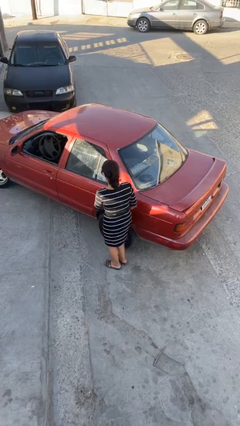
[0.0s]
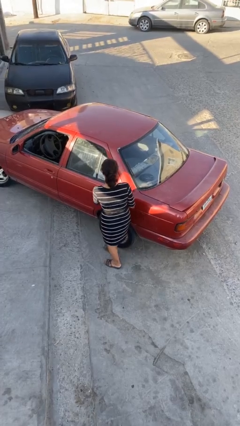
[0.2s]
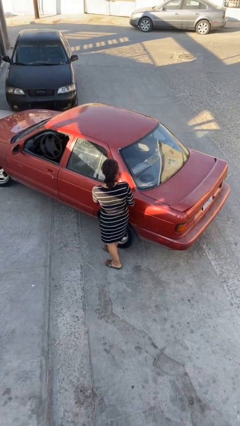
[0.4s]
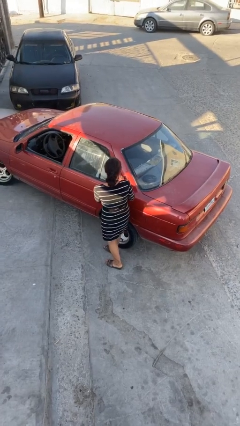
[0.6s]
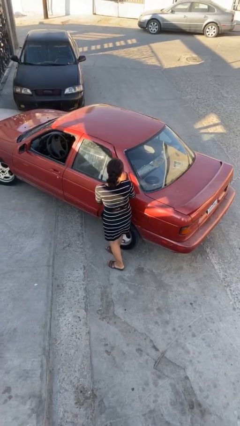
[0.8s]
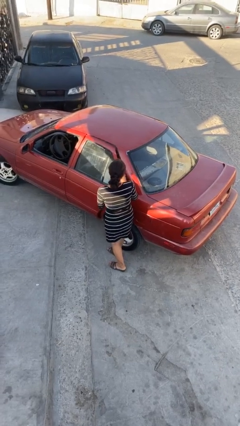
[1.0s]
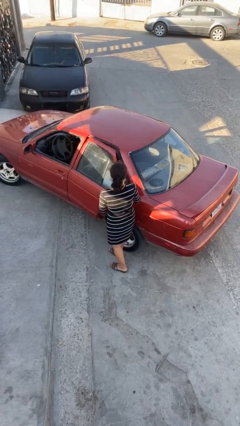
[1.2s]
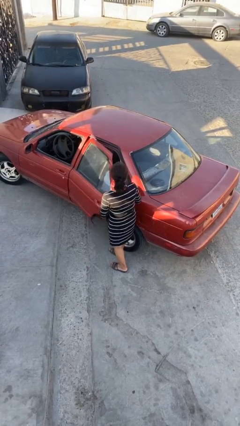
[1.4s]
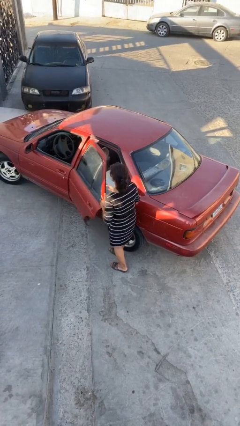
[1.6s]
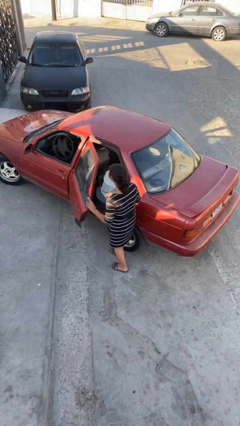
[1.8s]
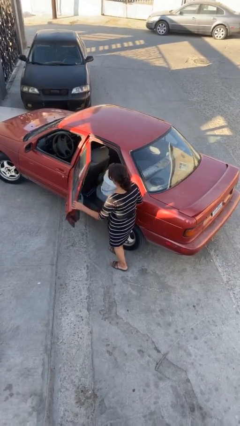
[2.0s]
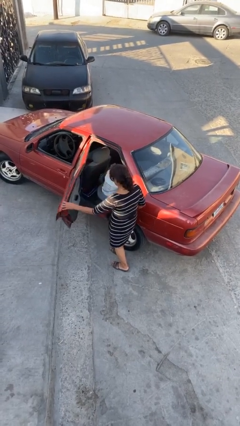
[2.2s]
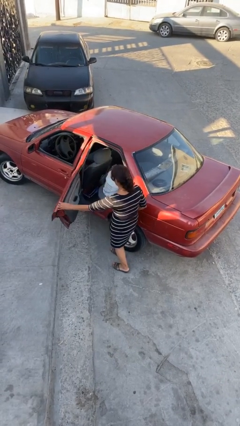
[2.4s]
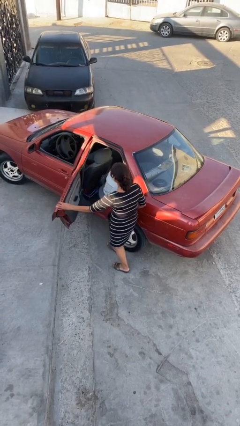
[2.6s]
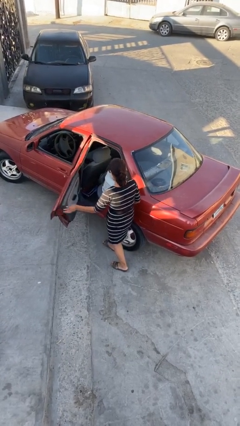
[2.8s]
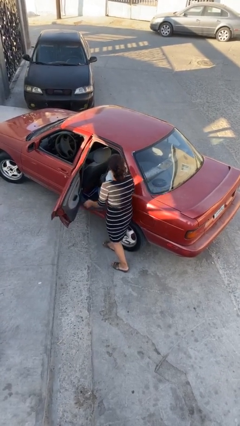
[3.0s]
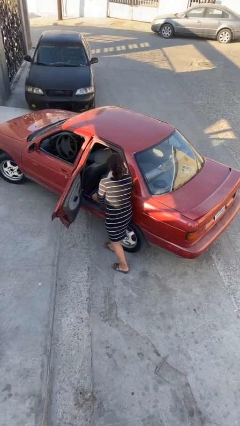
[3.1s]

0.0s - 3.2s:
person opens car door

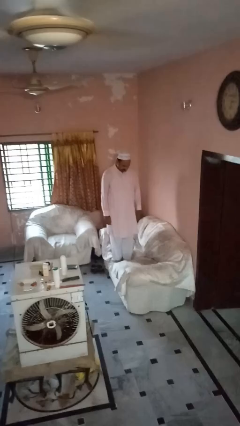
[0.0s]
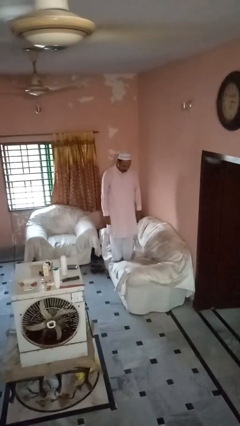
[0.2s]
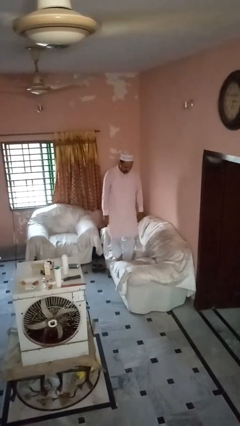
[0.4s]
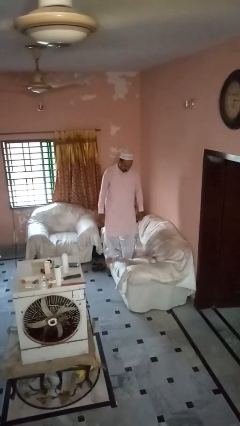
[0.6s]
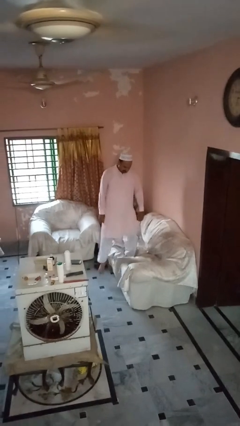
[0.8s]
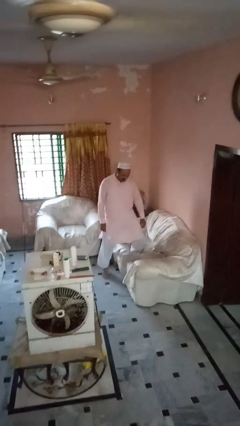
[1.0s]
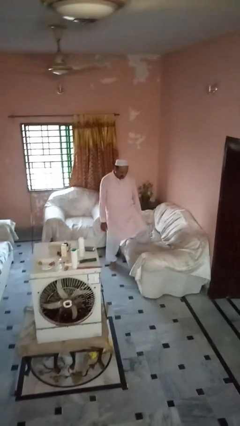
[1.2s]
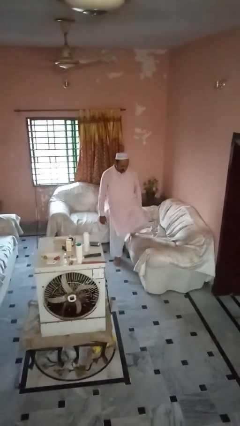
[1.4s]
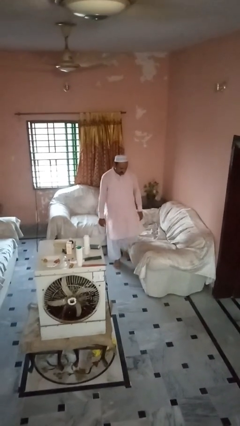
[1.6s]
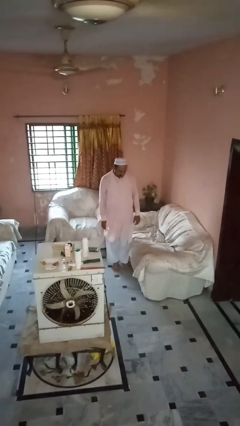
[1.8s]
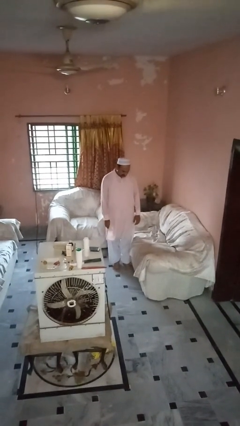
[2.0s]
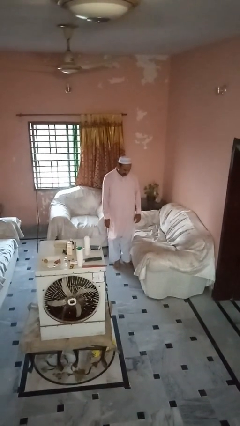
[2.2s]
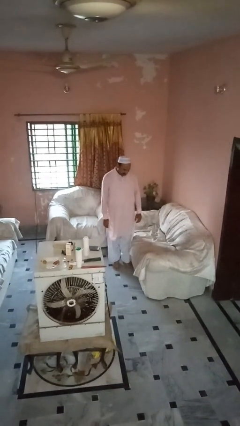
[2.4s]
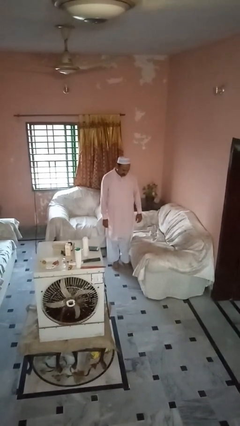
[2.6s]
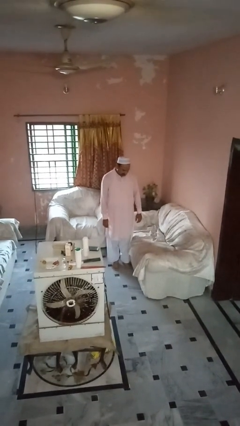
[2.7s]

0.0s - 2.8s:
person climbs off couch

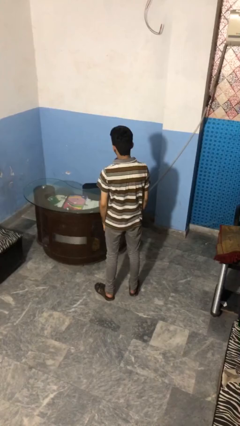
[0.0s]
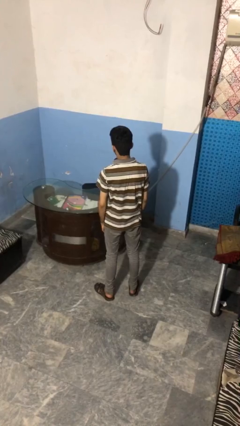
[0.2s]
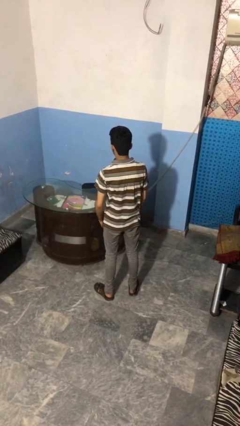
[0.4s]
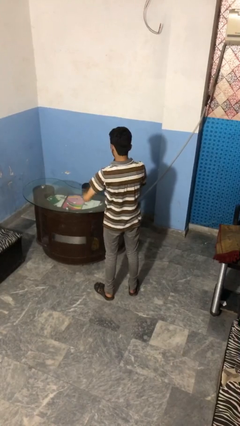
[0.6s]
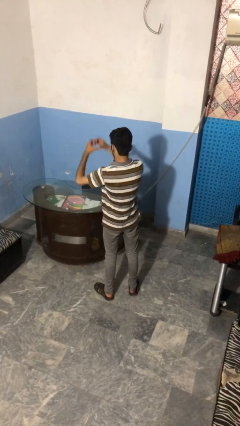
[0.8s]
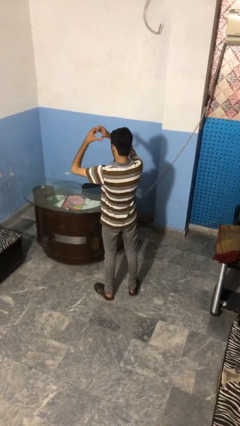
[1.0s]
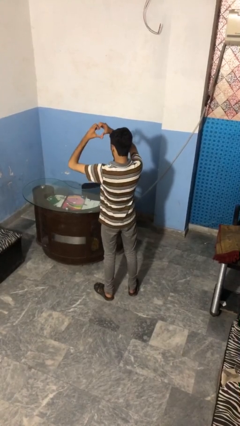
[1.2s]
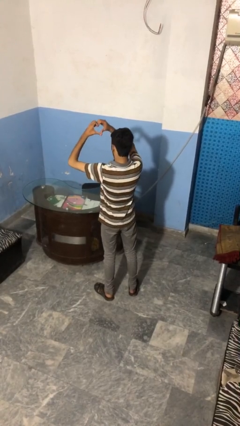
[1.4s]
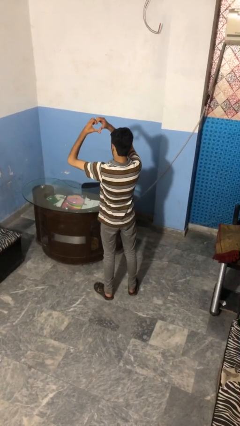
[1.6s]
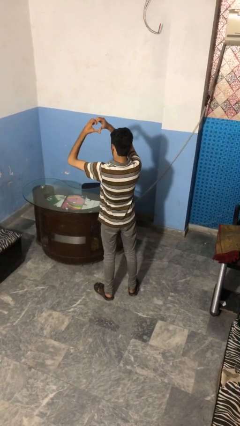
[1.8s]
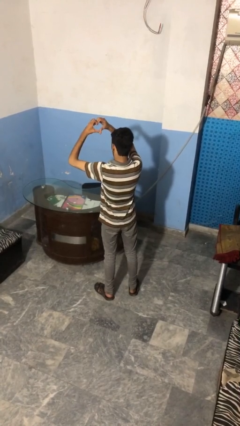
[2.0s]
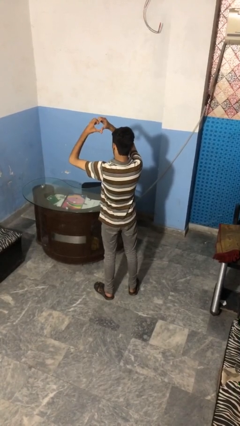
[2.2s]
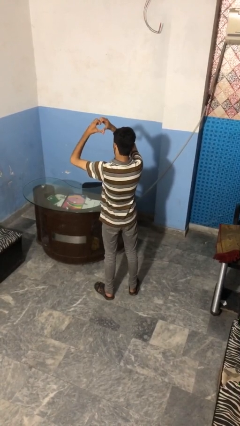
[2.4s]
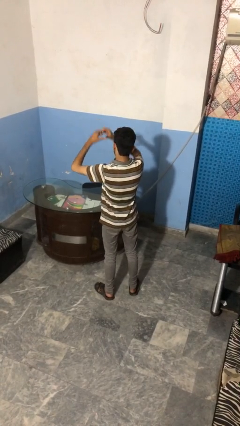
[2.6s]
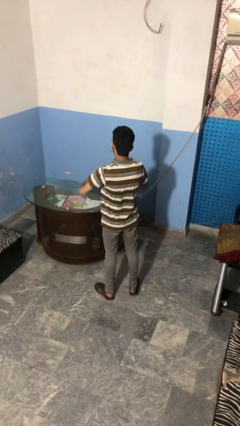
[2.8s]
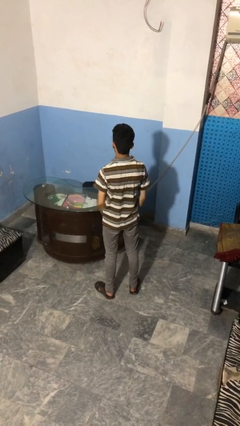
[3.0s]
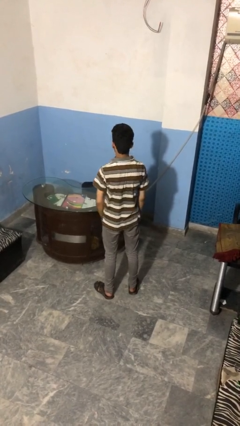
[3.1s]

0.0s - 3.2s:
person gestures heart

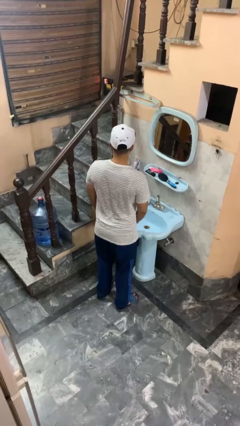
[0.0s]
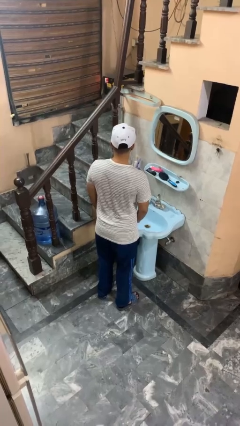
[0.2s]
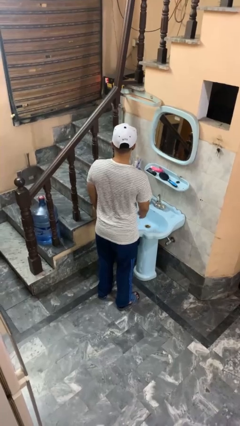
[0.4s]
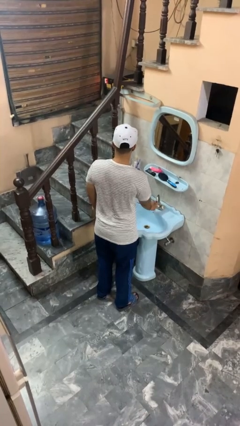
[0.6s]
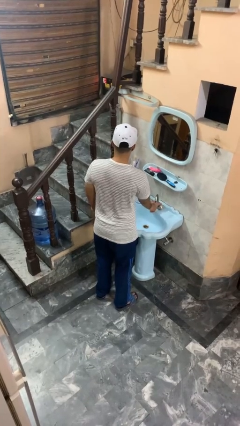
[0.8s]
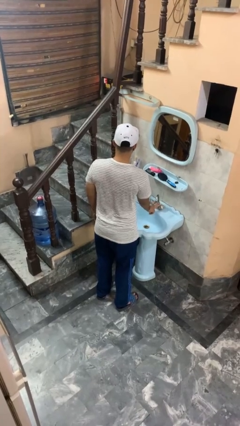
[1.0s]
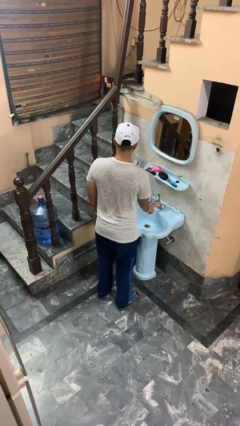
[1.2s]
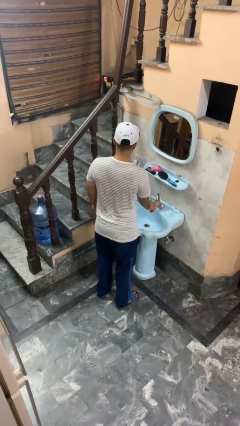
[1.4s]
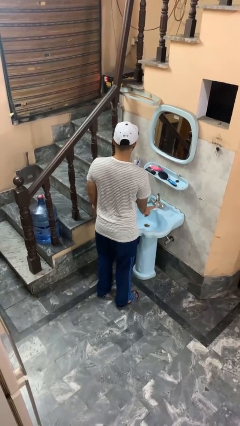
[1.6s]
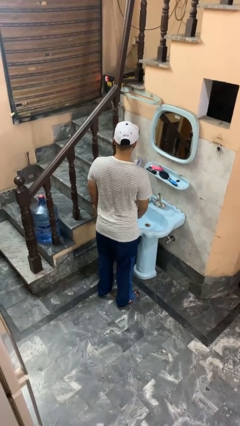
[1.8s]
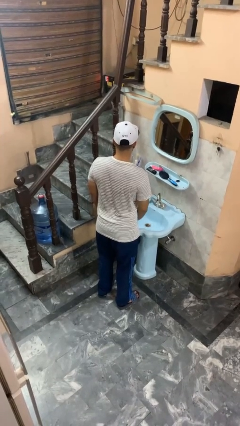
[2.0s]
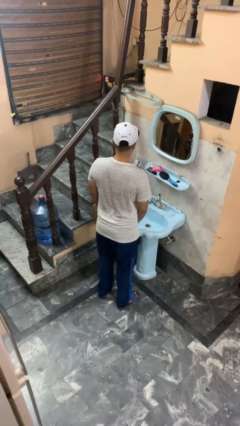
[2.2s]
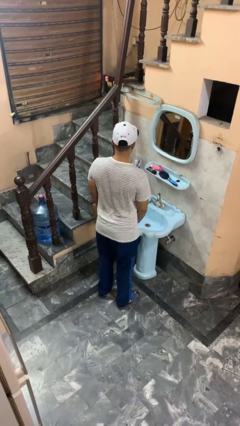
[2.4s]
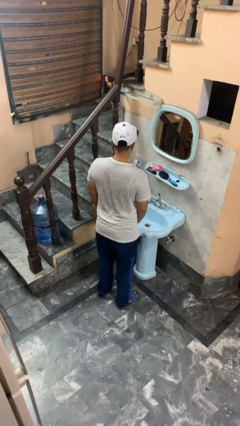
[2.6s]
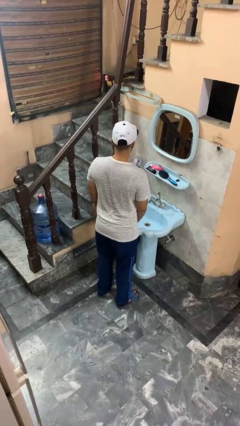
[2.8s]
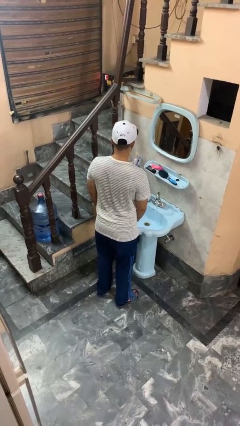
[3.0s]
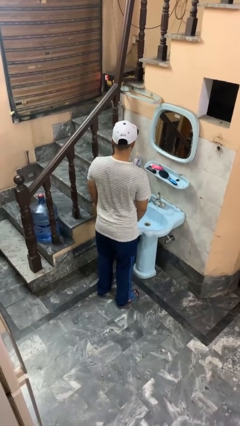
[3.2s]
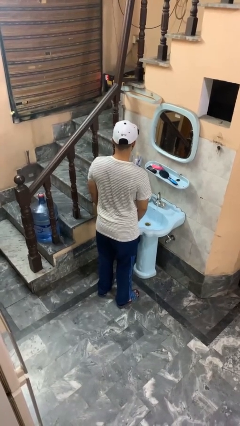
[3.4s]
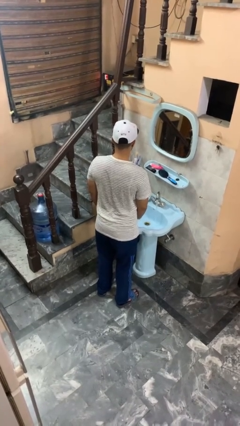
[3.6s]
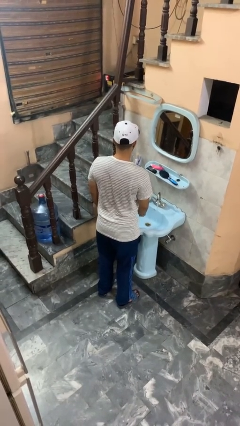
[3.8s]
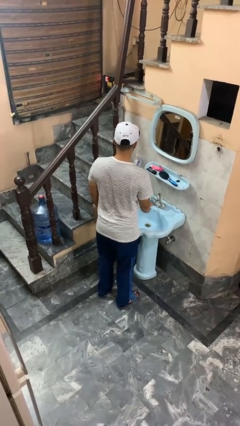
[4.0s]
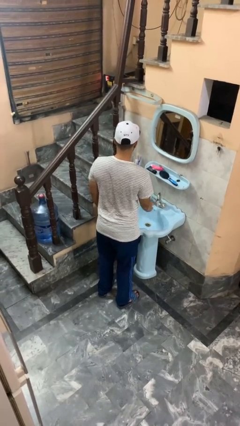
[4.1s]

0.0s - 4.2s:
person turns on faucet

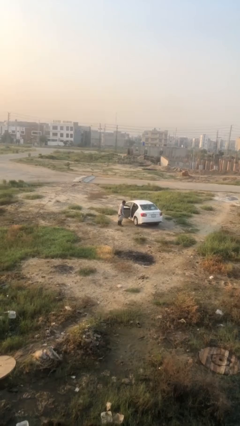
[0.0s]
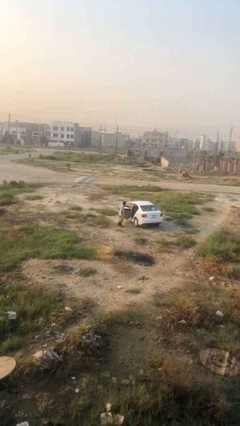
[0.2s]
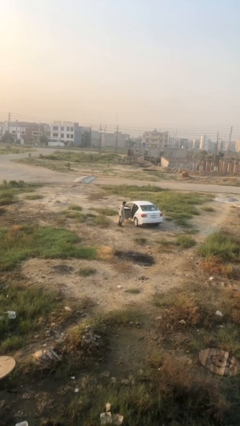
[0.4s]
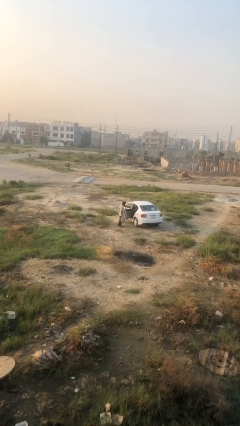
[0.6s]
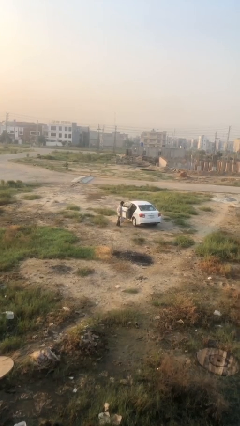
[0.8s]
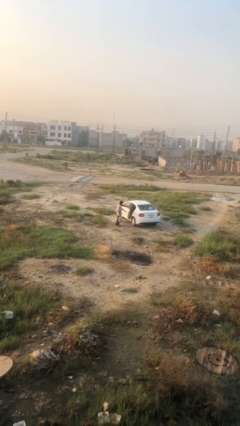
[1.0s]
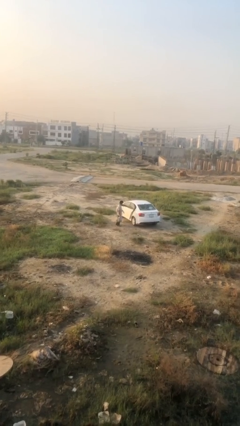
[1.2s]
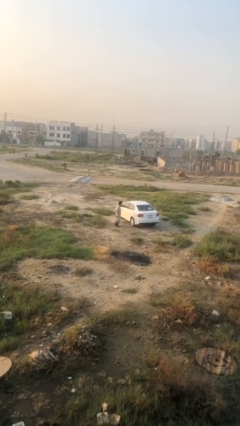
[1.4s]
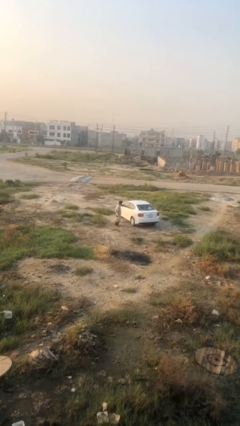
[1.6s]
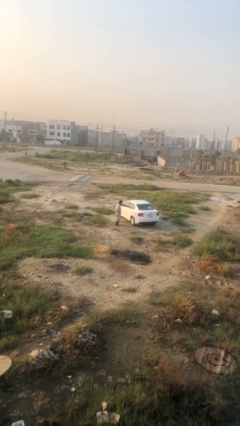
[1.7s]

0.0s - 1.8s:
person closes car door

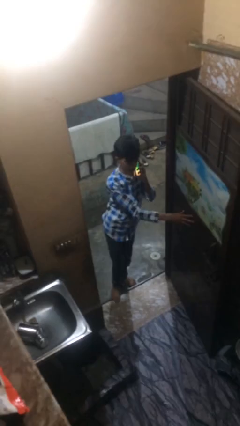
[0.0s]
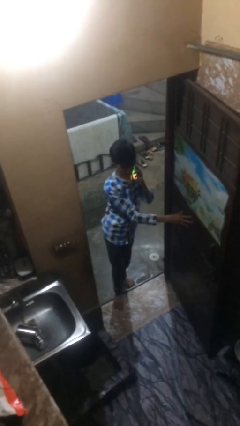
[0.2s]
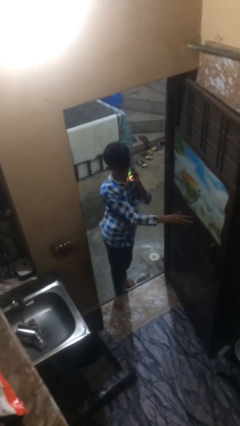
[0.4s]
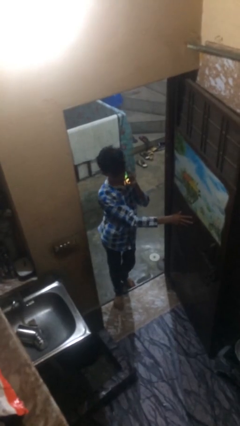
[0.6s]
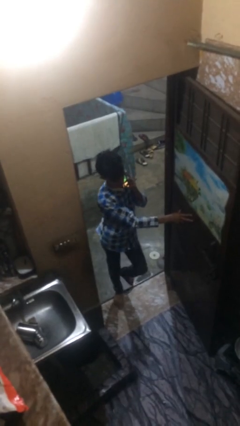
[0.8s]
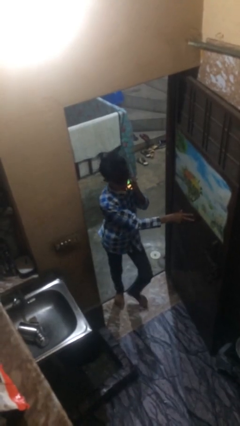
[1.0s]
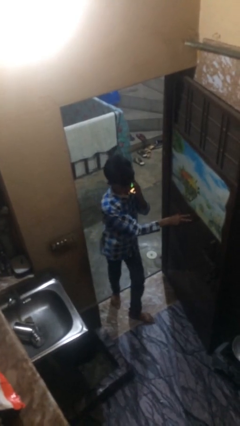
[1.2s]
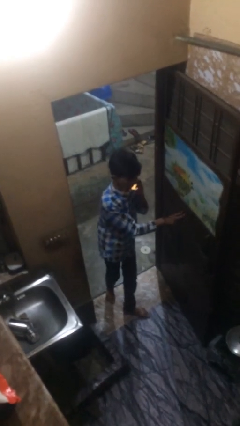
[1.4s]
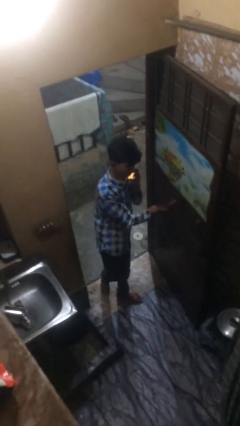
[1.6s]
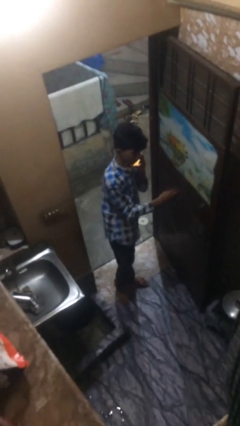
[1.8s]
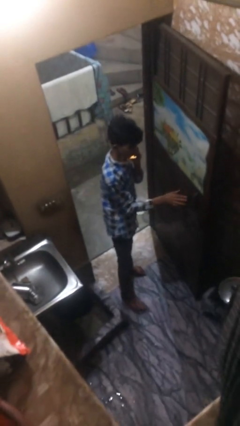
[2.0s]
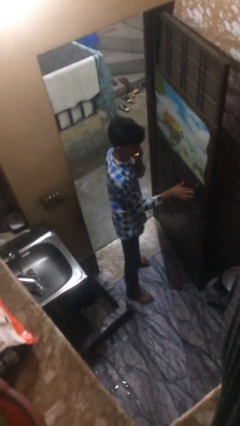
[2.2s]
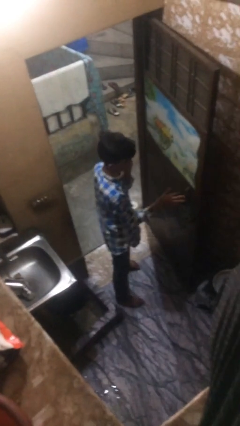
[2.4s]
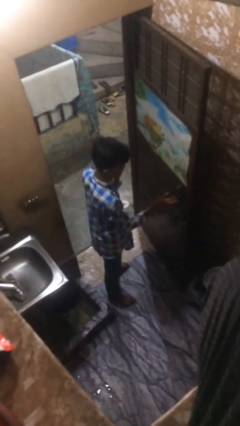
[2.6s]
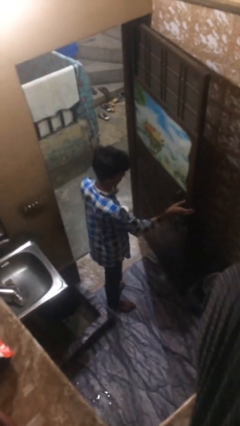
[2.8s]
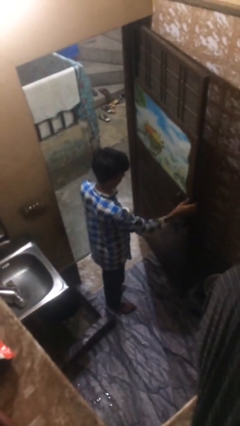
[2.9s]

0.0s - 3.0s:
person enters scene through structure
